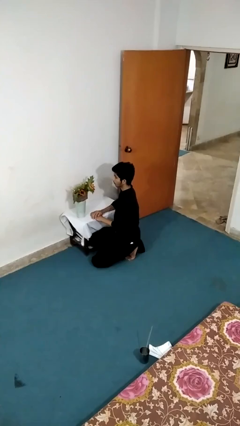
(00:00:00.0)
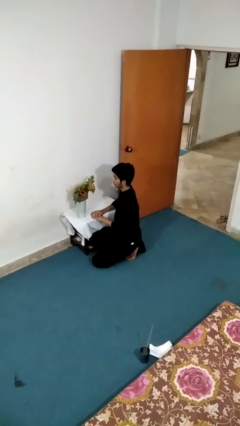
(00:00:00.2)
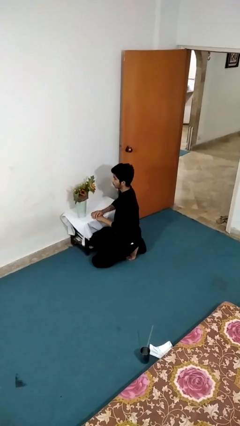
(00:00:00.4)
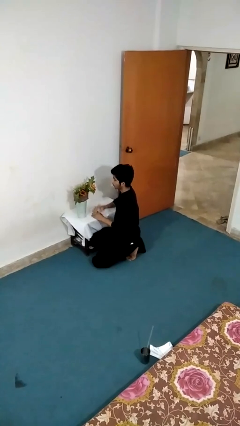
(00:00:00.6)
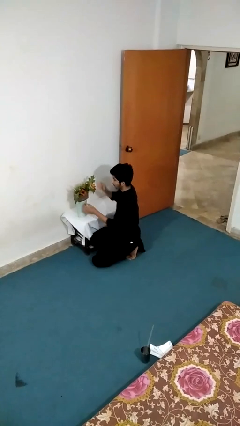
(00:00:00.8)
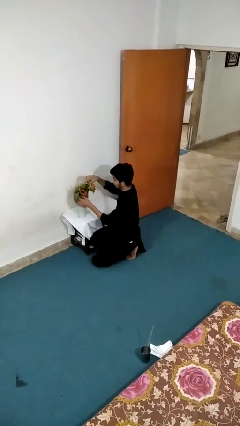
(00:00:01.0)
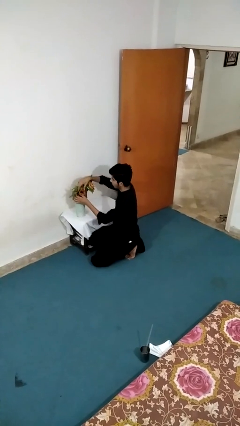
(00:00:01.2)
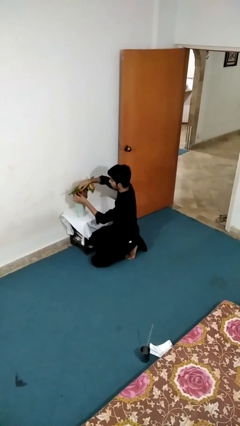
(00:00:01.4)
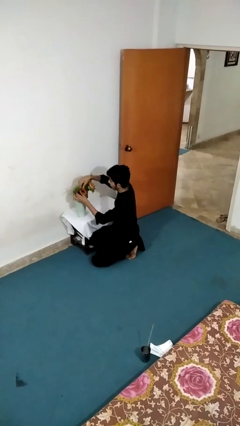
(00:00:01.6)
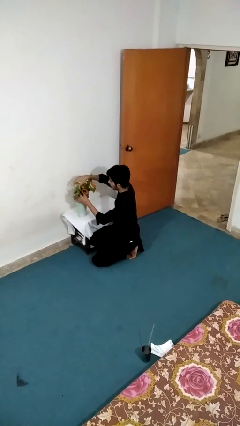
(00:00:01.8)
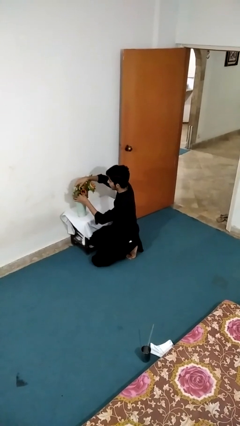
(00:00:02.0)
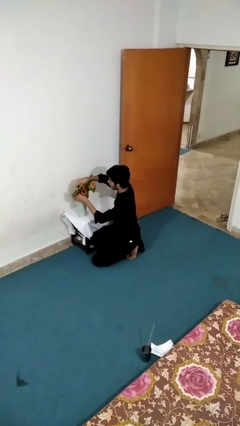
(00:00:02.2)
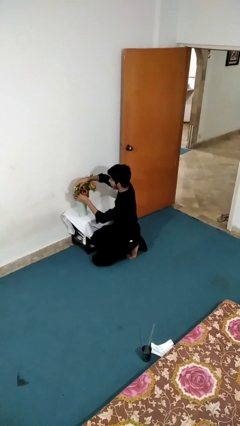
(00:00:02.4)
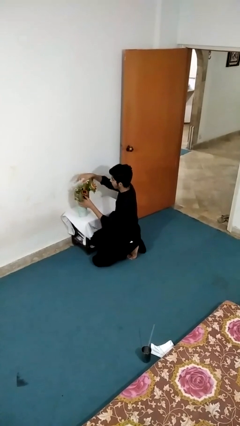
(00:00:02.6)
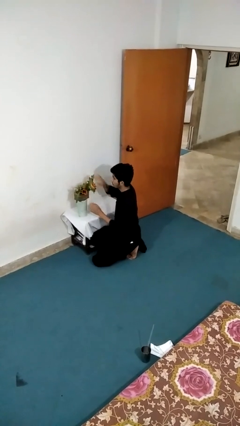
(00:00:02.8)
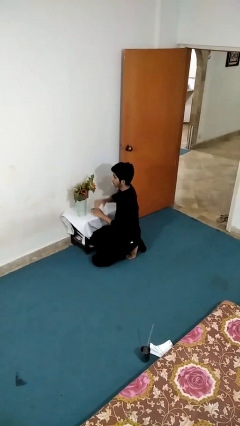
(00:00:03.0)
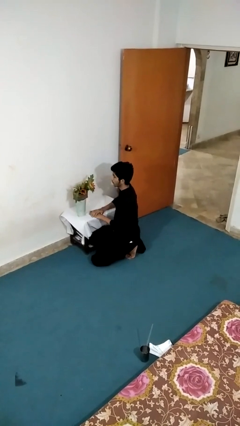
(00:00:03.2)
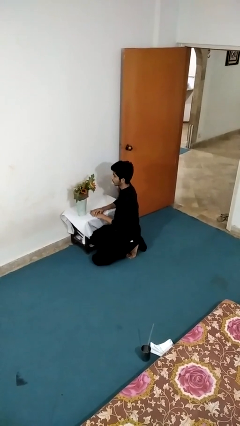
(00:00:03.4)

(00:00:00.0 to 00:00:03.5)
person arranges flowers in vase

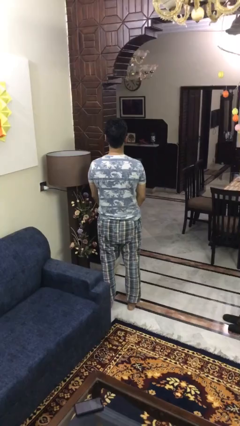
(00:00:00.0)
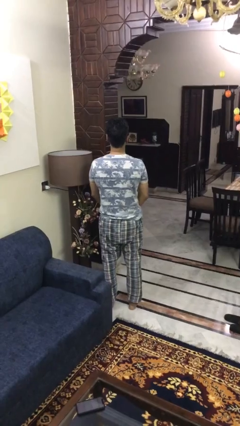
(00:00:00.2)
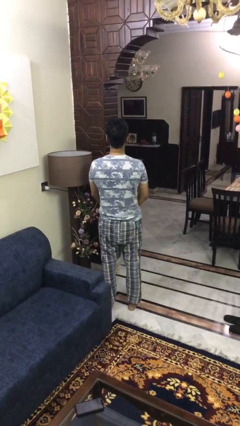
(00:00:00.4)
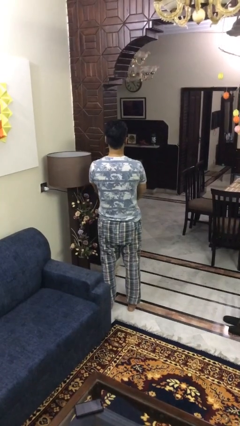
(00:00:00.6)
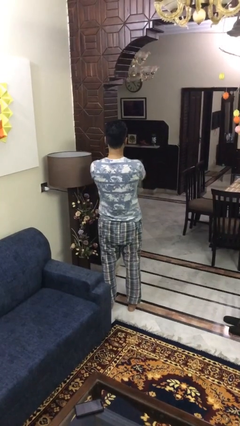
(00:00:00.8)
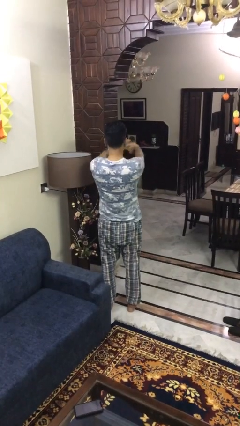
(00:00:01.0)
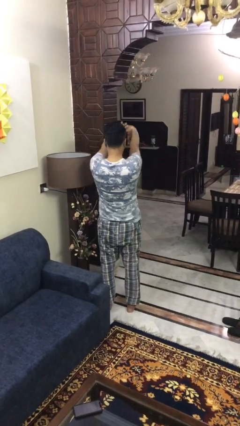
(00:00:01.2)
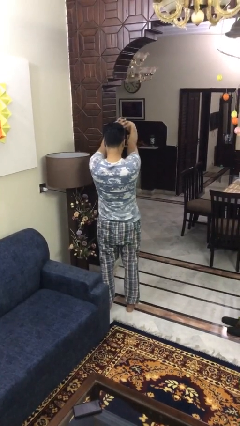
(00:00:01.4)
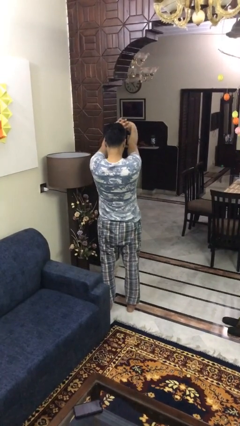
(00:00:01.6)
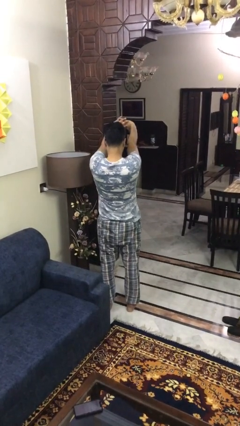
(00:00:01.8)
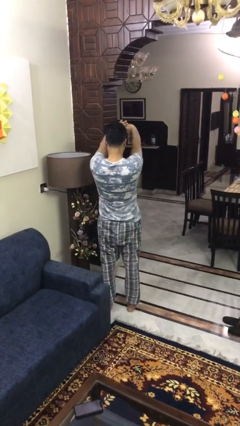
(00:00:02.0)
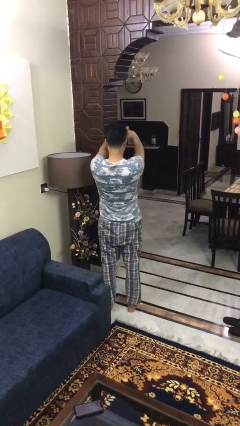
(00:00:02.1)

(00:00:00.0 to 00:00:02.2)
person cracks knuckles

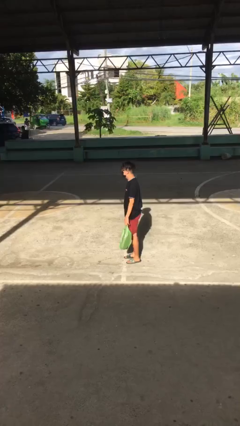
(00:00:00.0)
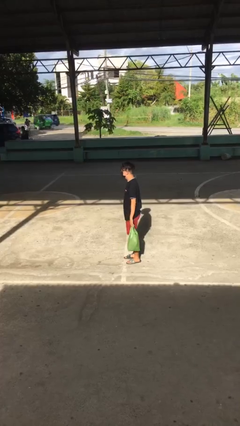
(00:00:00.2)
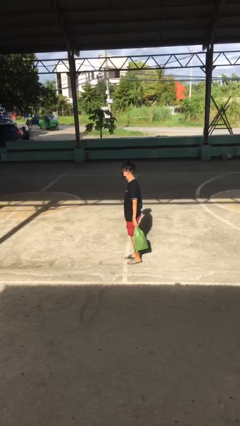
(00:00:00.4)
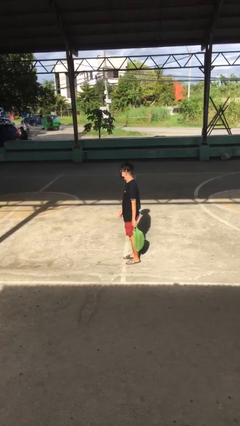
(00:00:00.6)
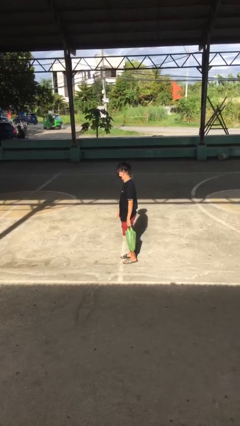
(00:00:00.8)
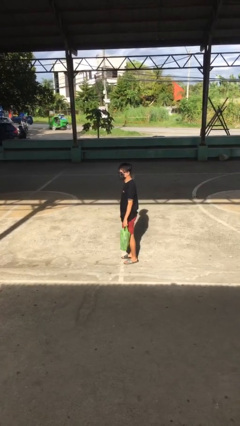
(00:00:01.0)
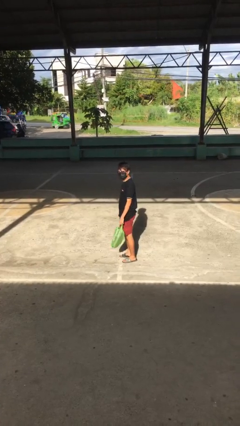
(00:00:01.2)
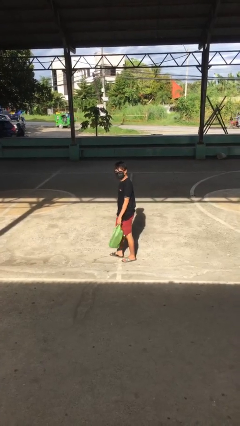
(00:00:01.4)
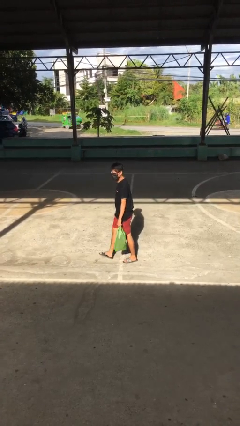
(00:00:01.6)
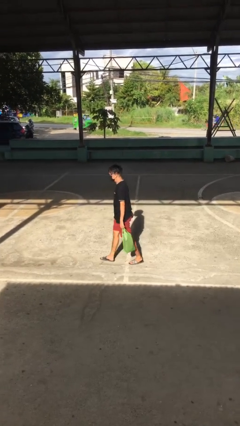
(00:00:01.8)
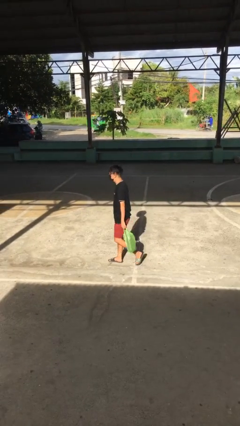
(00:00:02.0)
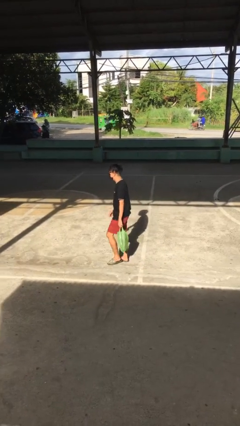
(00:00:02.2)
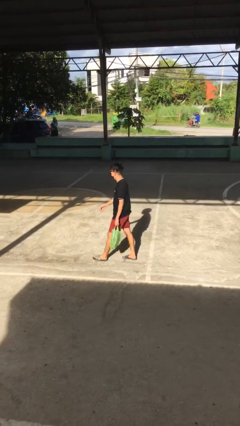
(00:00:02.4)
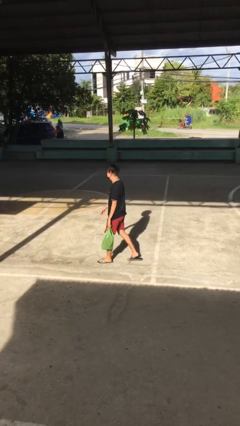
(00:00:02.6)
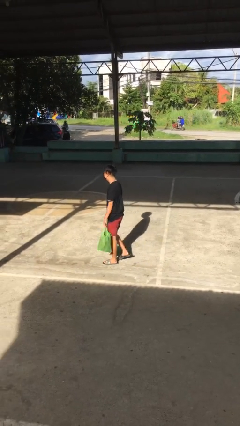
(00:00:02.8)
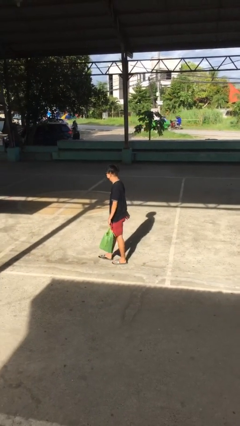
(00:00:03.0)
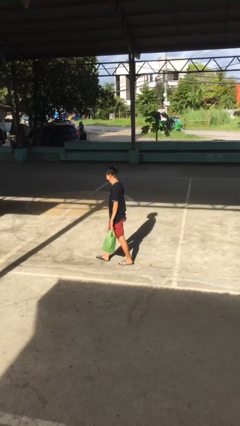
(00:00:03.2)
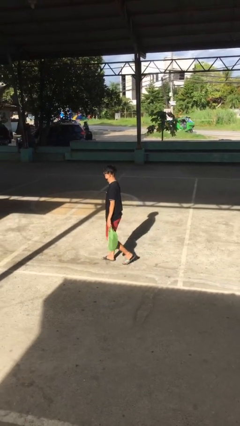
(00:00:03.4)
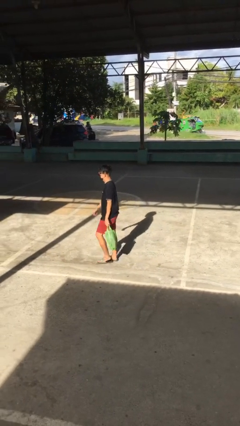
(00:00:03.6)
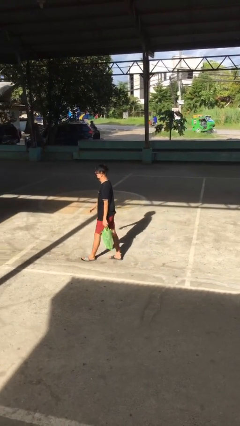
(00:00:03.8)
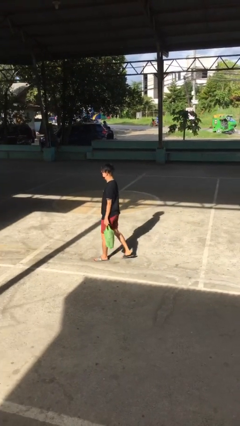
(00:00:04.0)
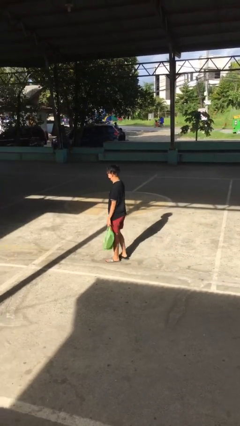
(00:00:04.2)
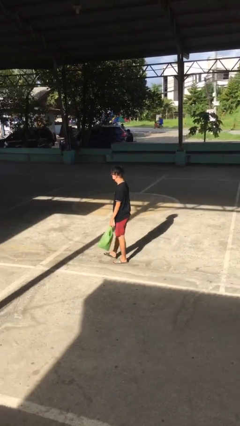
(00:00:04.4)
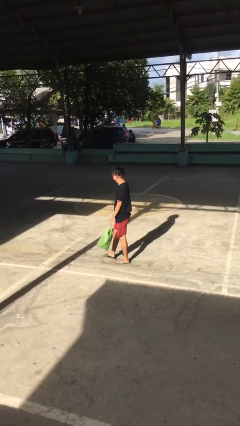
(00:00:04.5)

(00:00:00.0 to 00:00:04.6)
person carries groceries

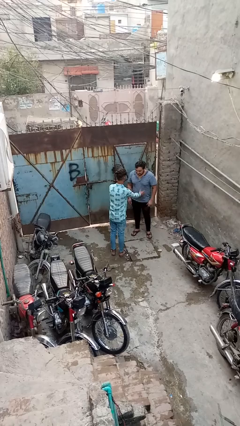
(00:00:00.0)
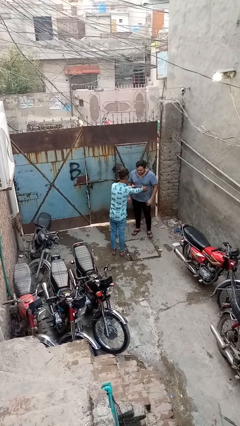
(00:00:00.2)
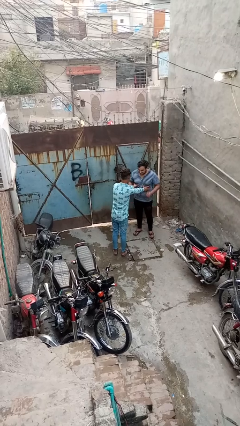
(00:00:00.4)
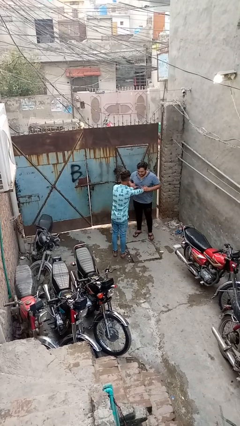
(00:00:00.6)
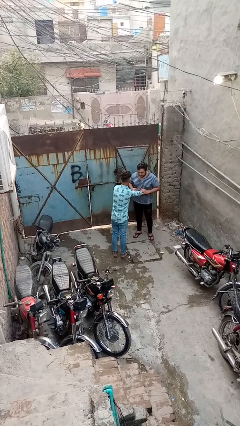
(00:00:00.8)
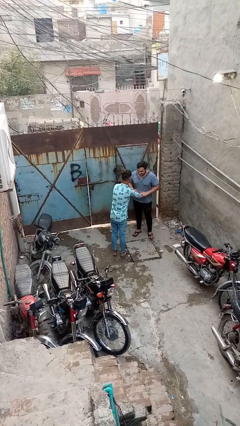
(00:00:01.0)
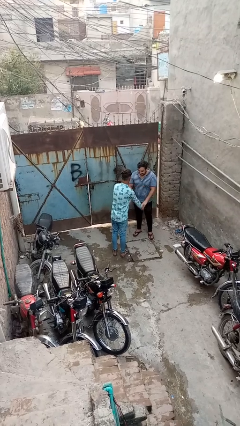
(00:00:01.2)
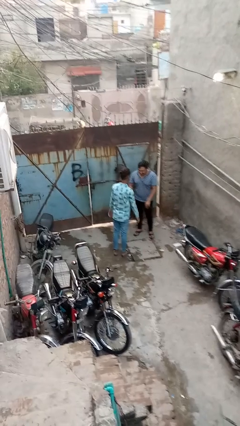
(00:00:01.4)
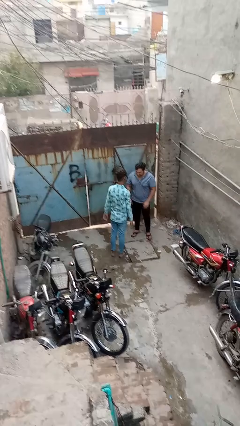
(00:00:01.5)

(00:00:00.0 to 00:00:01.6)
person tickles person

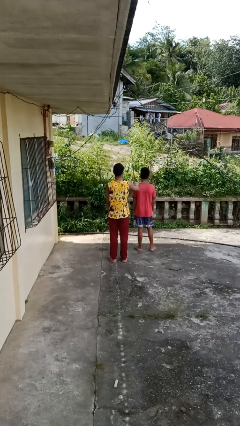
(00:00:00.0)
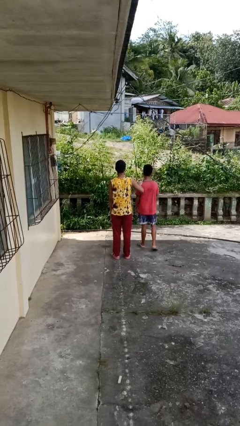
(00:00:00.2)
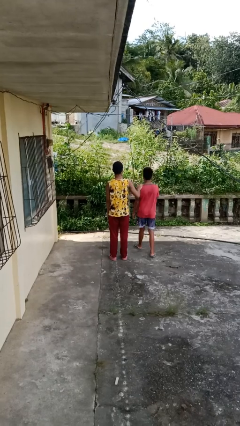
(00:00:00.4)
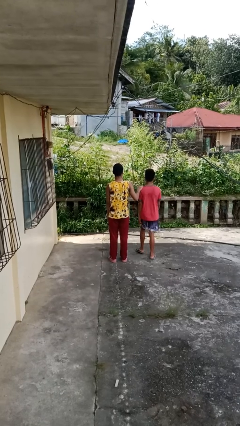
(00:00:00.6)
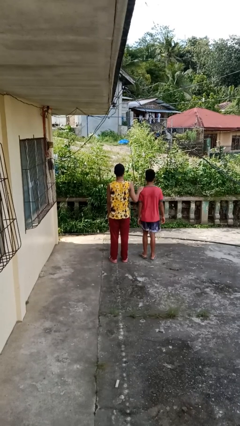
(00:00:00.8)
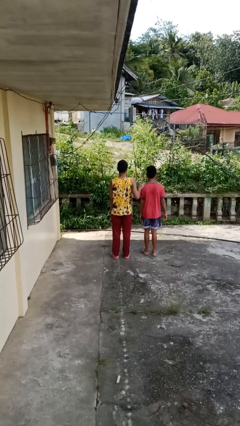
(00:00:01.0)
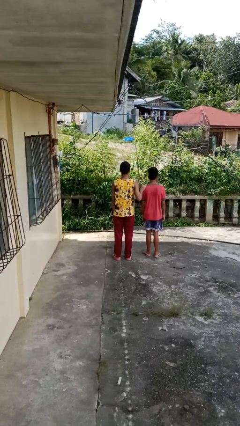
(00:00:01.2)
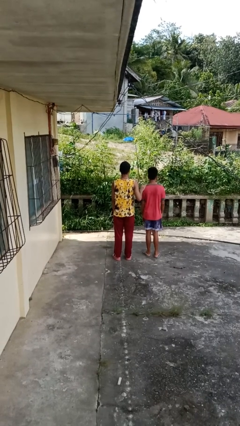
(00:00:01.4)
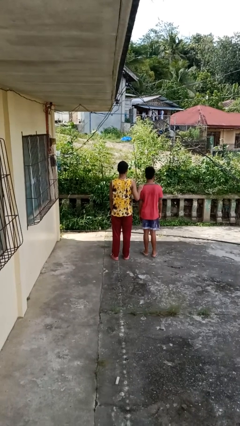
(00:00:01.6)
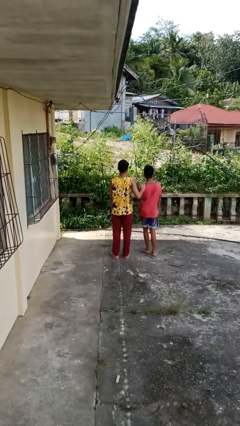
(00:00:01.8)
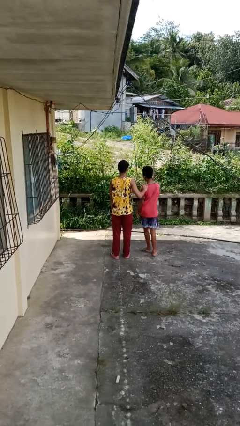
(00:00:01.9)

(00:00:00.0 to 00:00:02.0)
person grabs person by shoulder

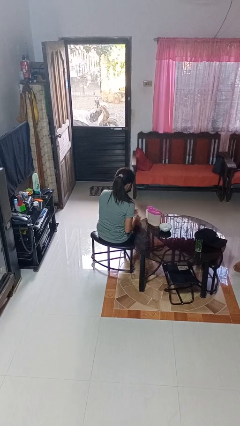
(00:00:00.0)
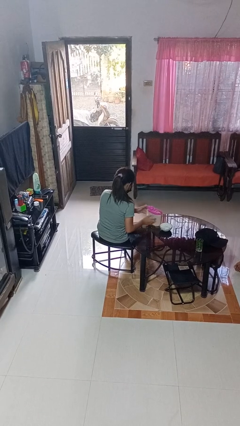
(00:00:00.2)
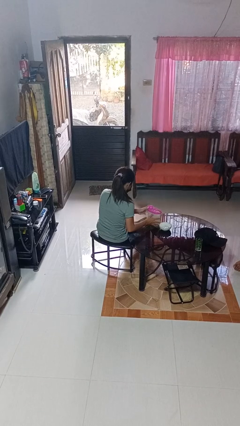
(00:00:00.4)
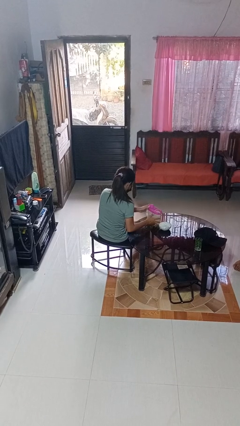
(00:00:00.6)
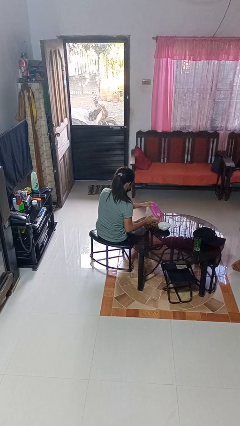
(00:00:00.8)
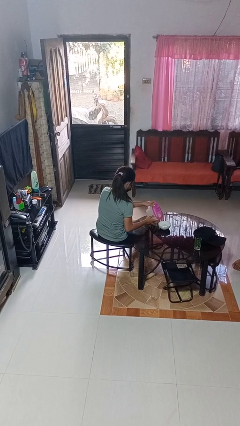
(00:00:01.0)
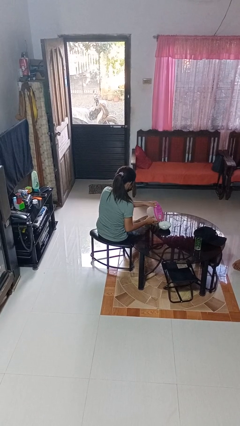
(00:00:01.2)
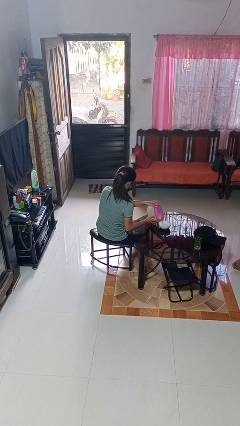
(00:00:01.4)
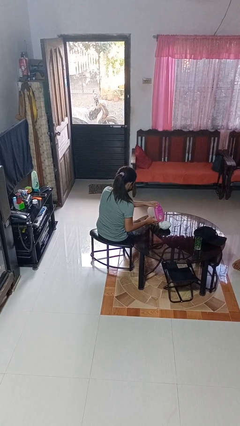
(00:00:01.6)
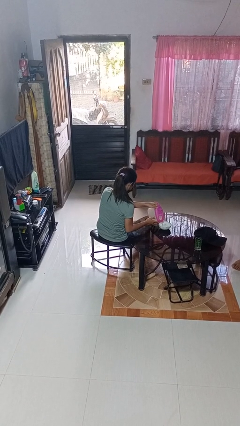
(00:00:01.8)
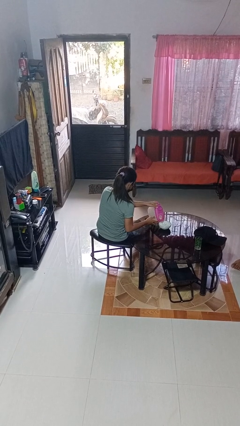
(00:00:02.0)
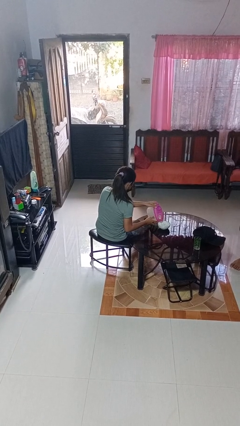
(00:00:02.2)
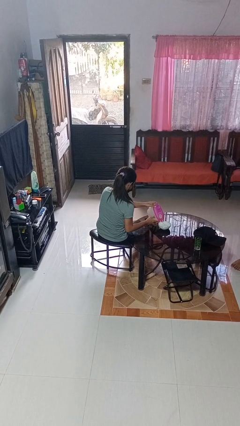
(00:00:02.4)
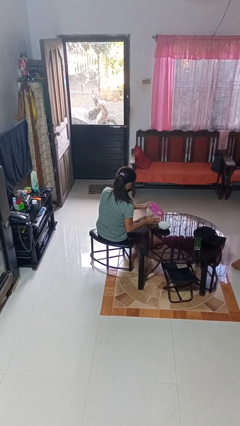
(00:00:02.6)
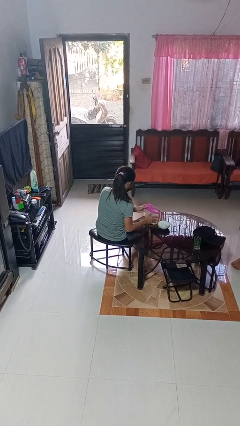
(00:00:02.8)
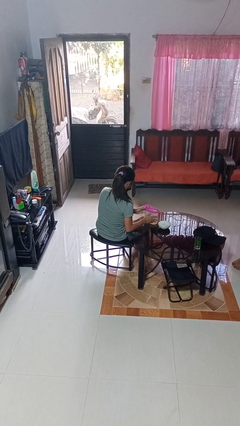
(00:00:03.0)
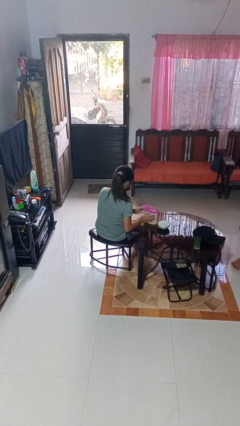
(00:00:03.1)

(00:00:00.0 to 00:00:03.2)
person pours into bowl

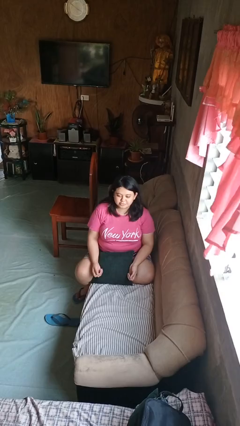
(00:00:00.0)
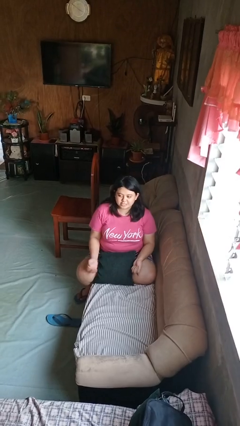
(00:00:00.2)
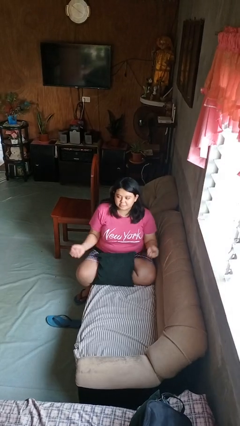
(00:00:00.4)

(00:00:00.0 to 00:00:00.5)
person shrugs
